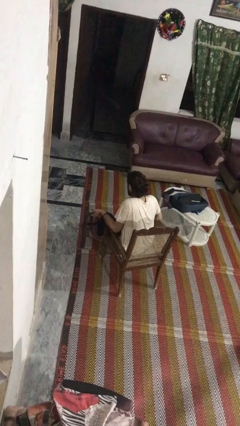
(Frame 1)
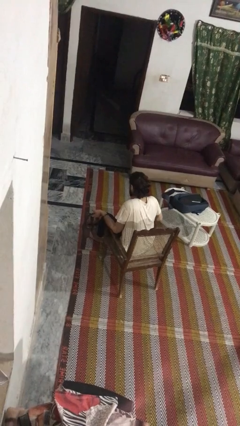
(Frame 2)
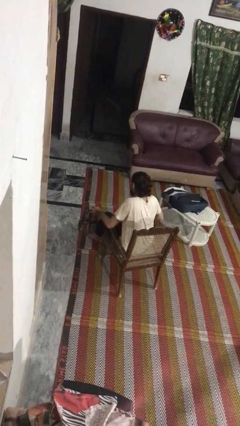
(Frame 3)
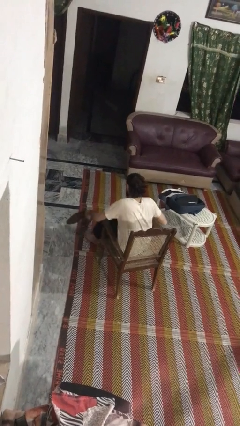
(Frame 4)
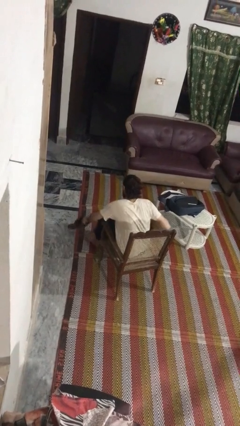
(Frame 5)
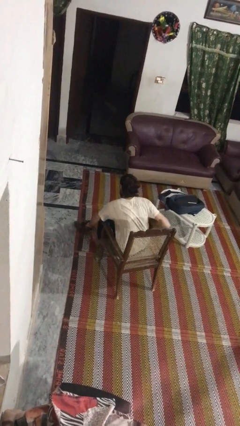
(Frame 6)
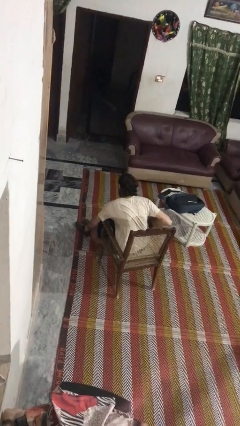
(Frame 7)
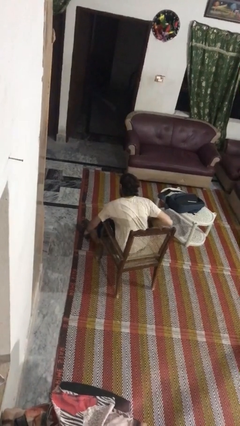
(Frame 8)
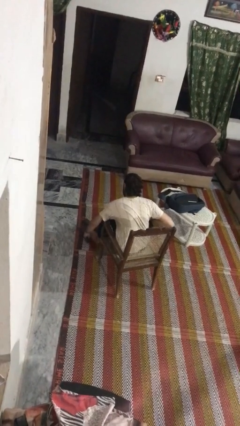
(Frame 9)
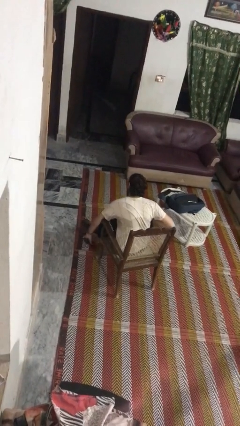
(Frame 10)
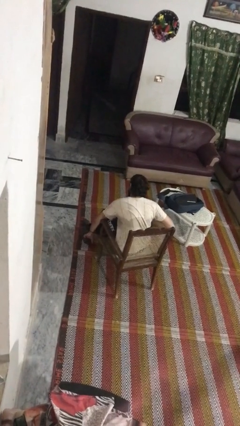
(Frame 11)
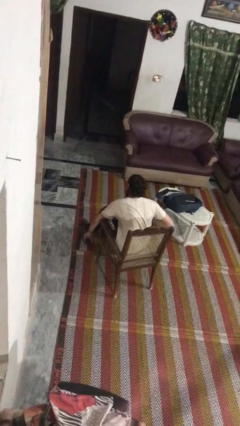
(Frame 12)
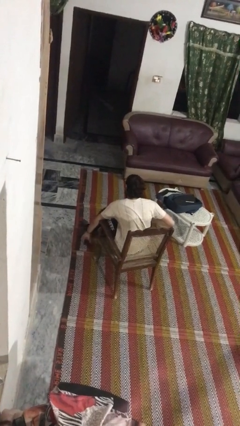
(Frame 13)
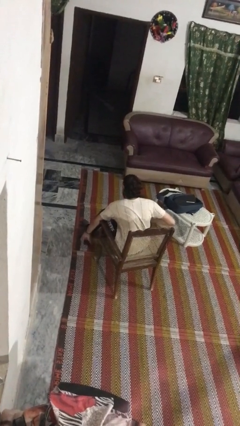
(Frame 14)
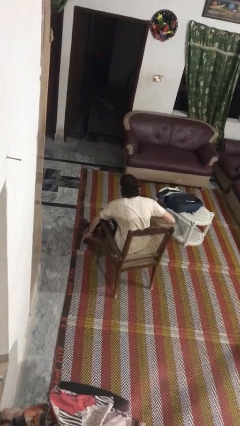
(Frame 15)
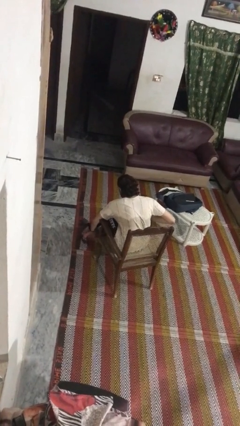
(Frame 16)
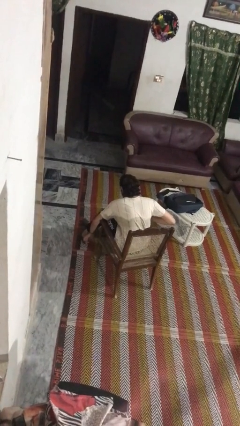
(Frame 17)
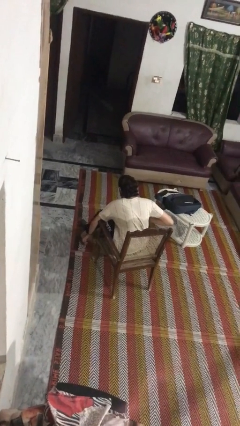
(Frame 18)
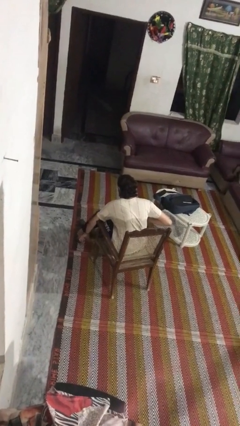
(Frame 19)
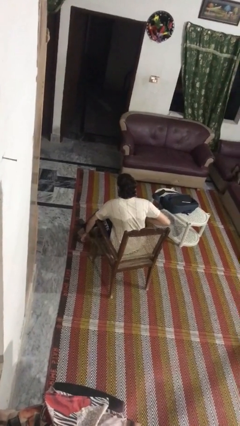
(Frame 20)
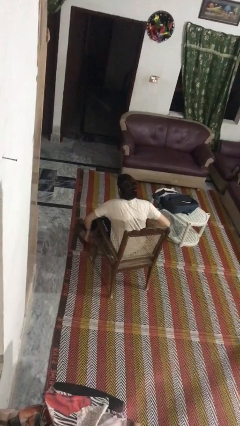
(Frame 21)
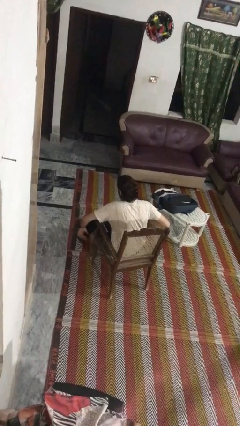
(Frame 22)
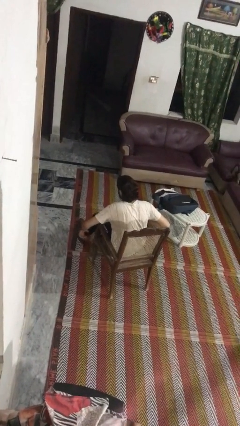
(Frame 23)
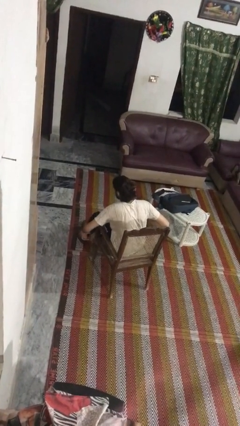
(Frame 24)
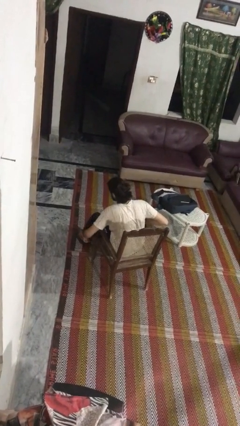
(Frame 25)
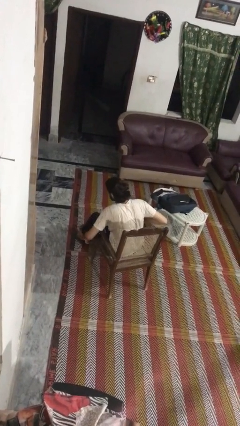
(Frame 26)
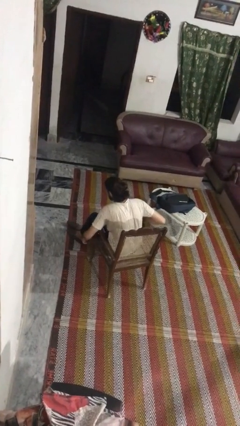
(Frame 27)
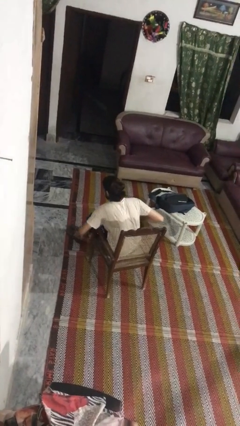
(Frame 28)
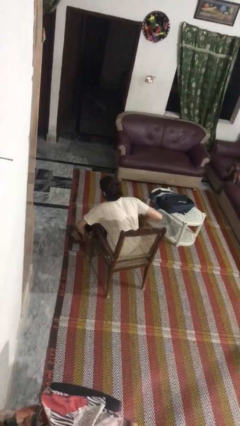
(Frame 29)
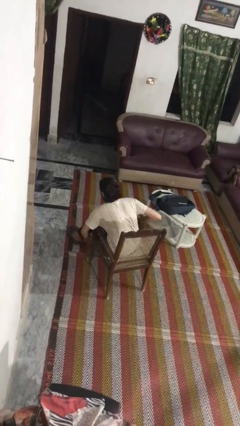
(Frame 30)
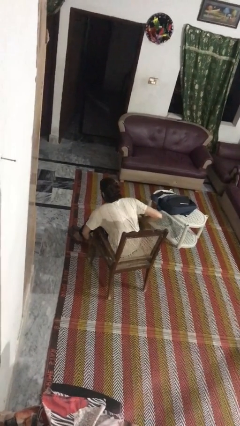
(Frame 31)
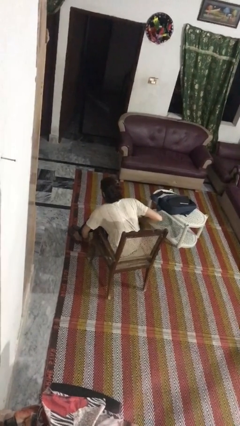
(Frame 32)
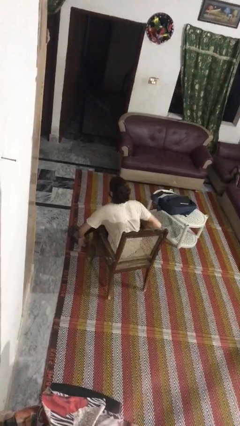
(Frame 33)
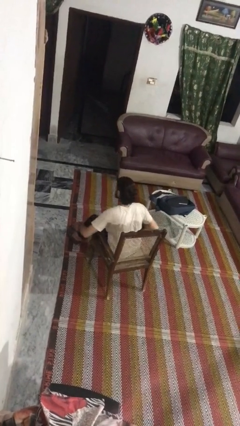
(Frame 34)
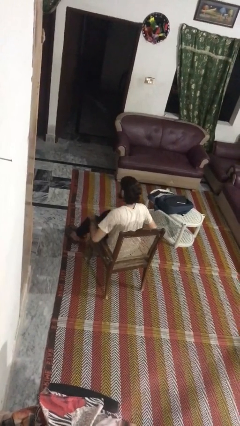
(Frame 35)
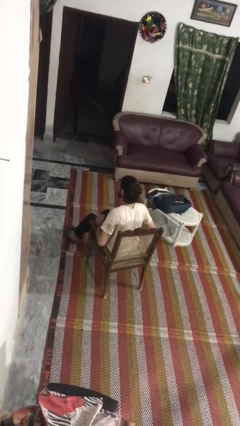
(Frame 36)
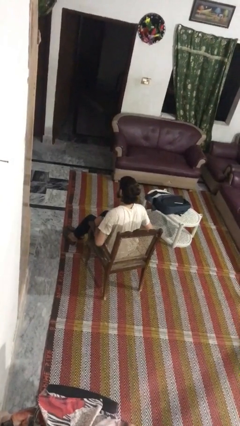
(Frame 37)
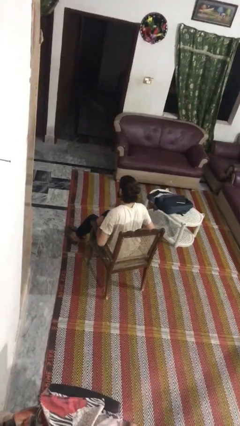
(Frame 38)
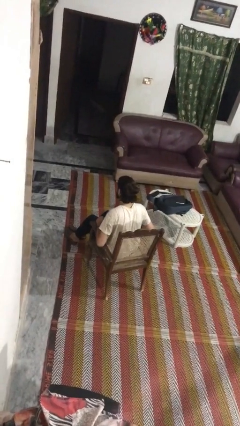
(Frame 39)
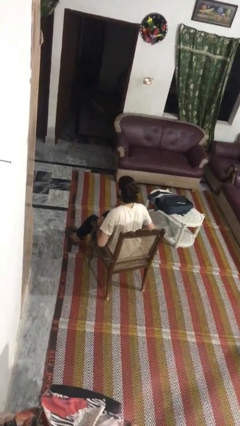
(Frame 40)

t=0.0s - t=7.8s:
person puts on shoes

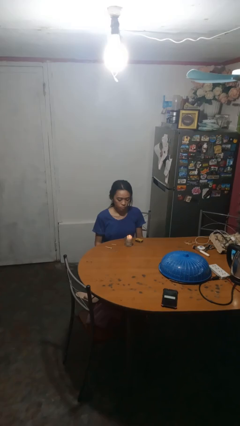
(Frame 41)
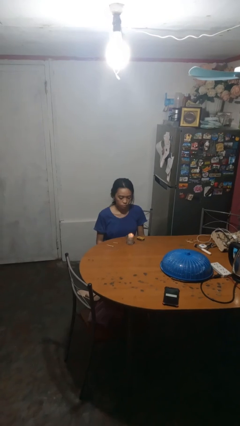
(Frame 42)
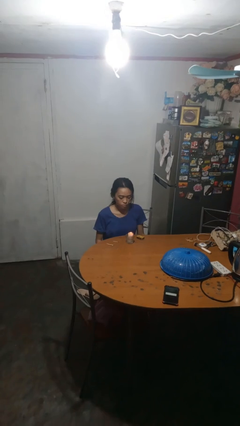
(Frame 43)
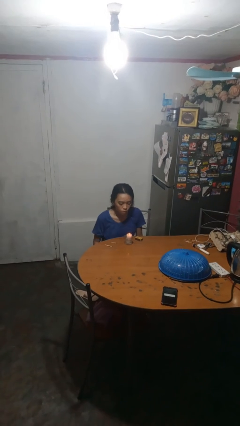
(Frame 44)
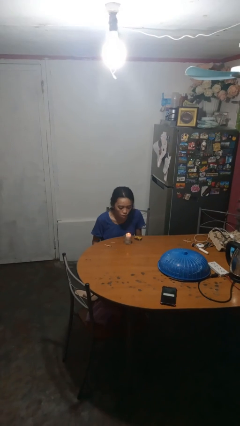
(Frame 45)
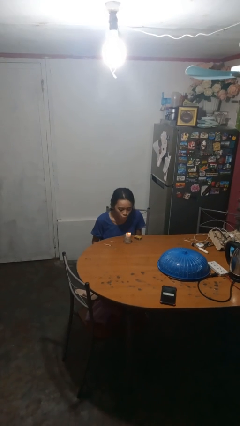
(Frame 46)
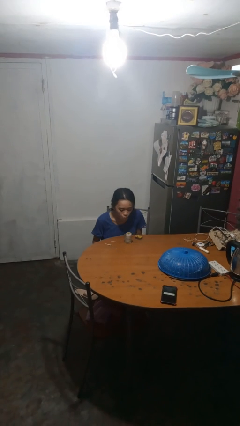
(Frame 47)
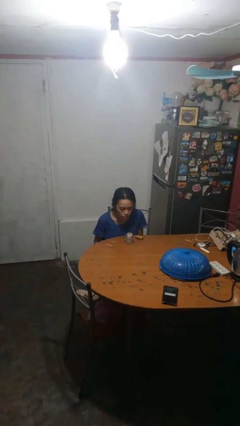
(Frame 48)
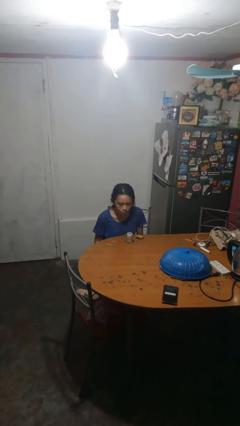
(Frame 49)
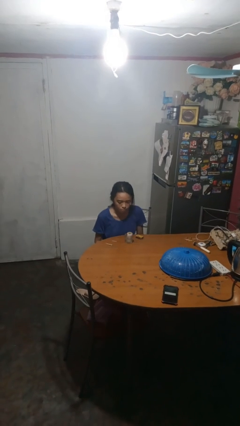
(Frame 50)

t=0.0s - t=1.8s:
person extinguishes candle

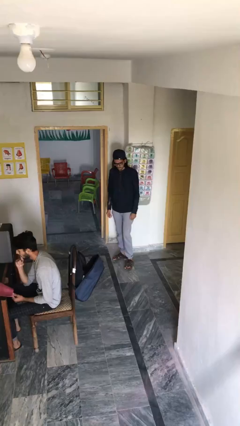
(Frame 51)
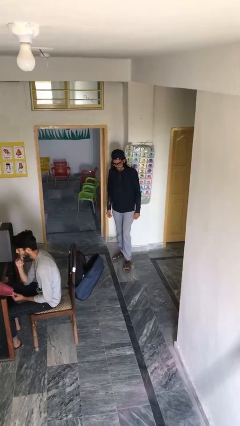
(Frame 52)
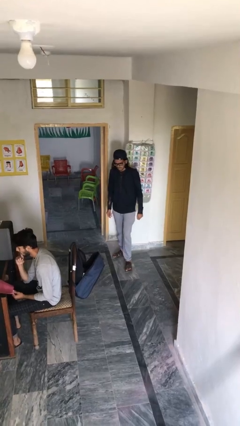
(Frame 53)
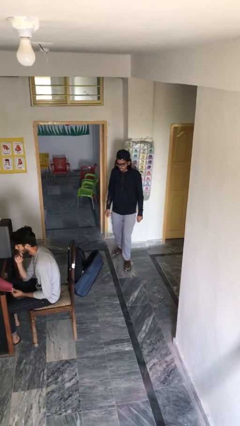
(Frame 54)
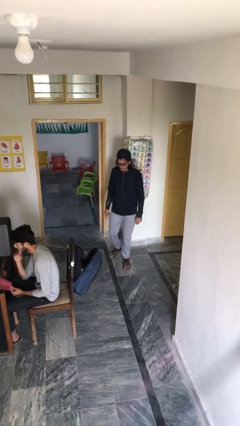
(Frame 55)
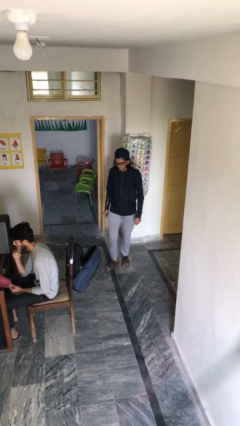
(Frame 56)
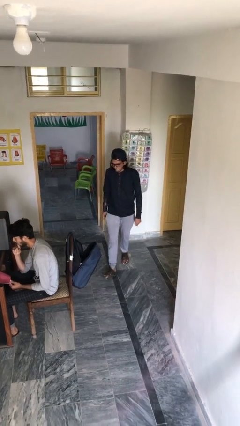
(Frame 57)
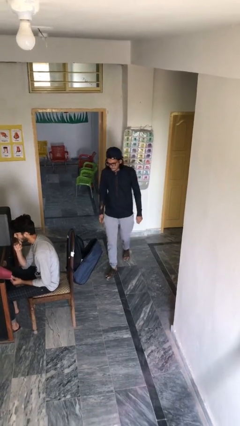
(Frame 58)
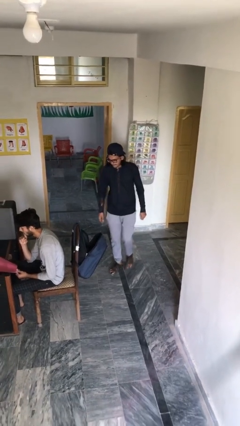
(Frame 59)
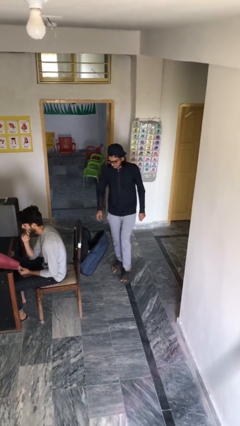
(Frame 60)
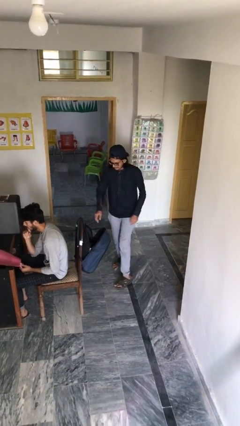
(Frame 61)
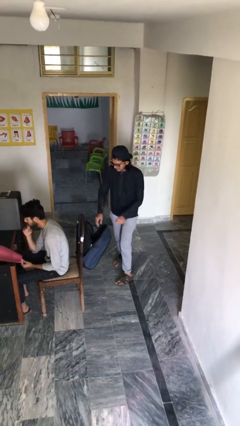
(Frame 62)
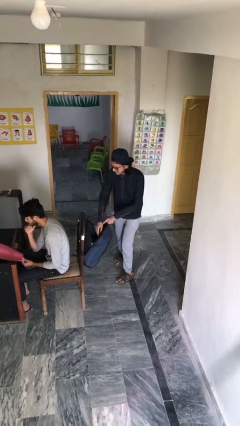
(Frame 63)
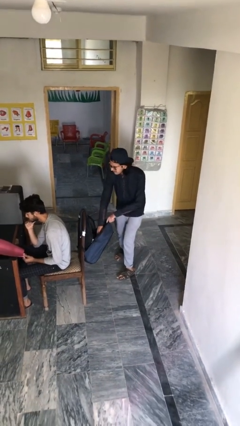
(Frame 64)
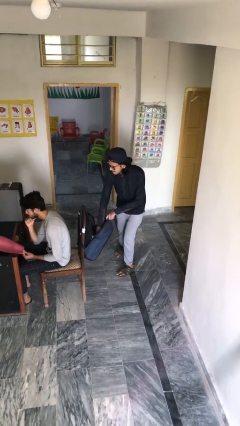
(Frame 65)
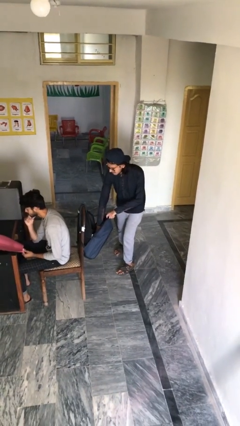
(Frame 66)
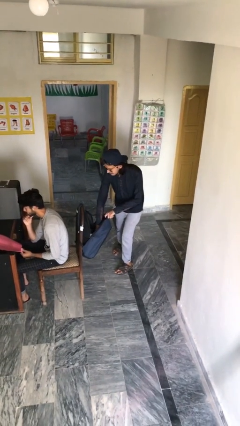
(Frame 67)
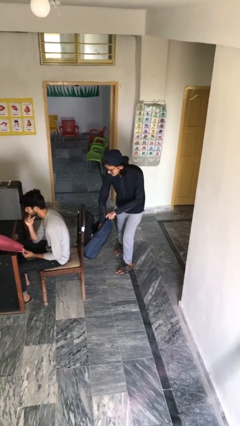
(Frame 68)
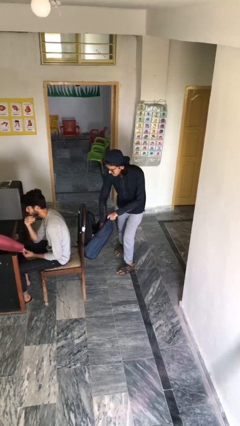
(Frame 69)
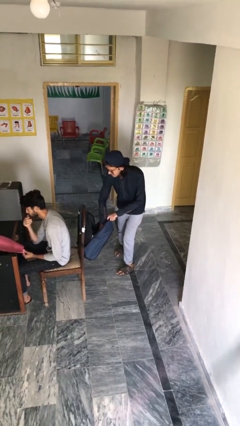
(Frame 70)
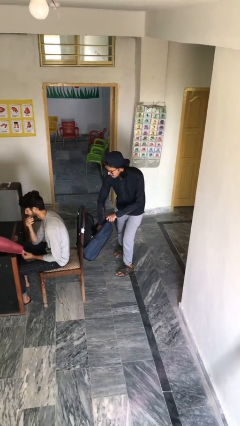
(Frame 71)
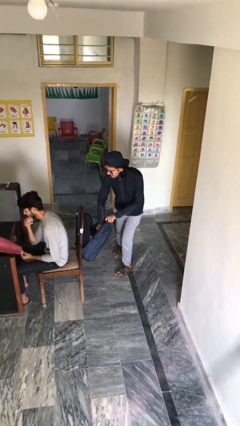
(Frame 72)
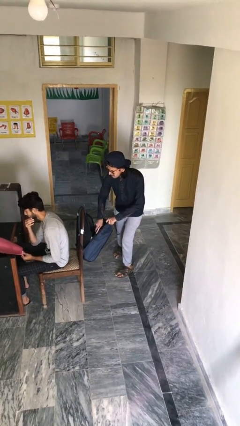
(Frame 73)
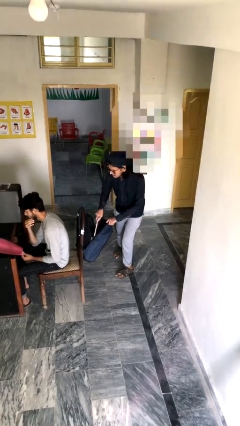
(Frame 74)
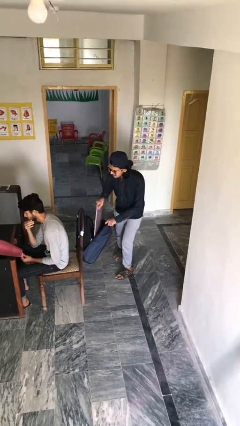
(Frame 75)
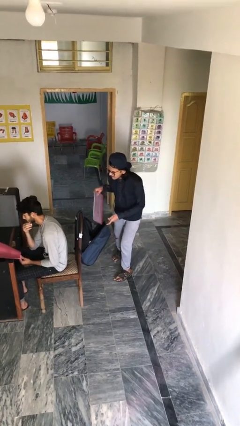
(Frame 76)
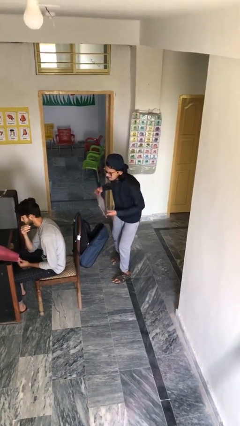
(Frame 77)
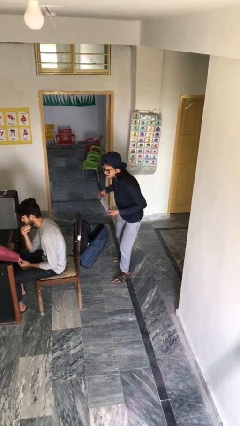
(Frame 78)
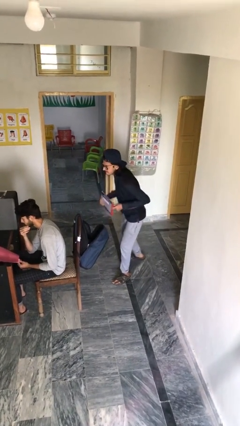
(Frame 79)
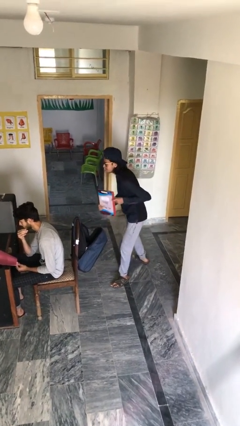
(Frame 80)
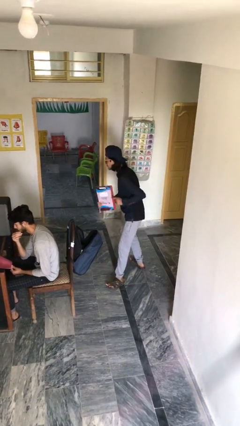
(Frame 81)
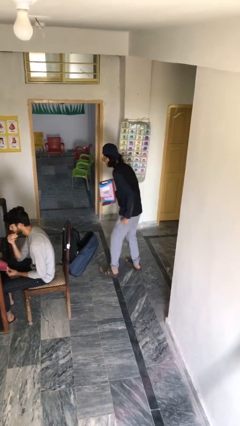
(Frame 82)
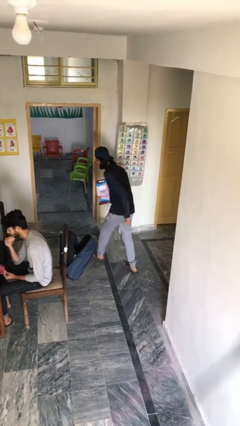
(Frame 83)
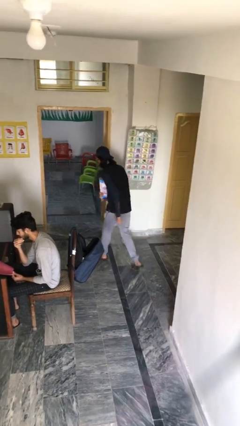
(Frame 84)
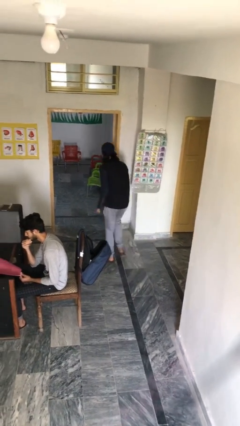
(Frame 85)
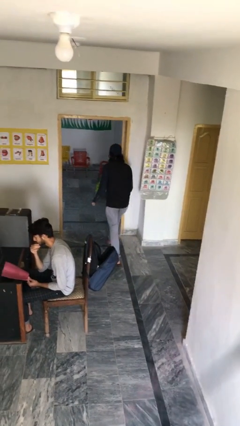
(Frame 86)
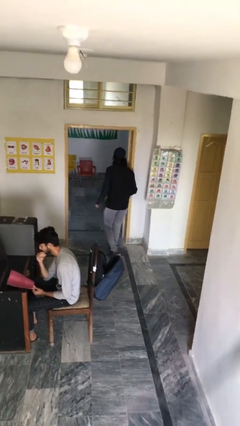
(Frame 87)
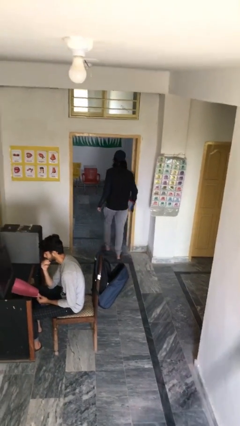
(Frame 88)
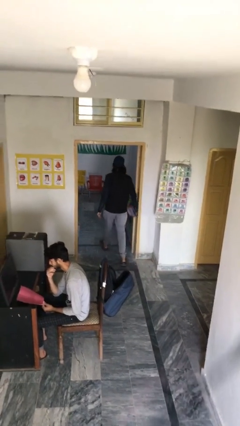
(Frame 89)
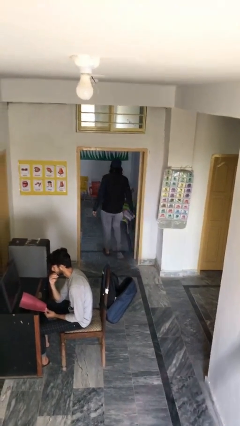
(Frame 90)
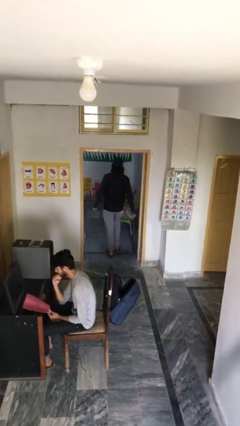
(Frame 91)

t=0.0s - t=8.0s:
person steals object from person
